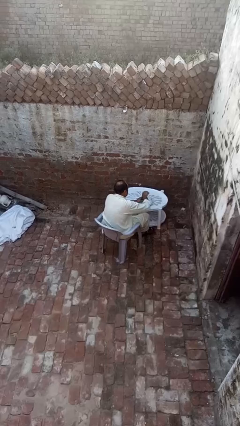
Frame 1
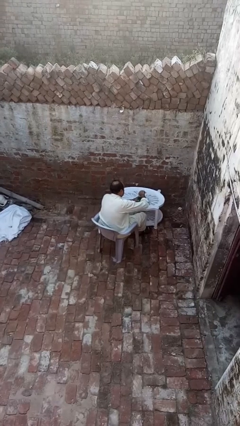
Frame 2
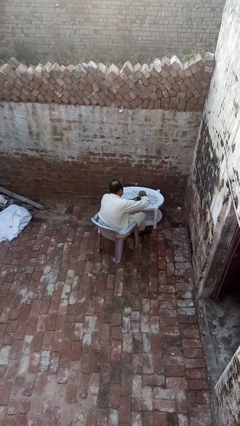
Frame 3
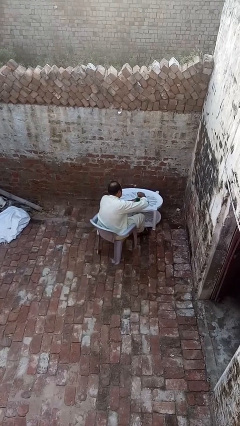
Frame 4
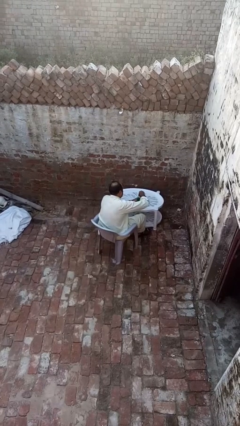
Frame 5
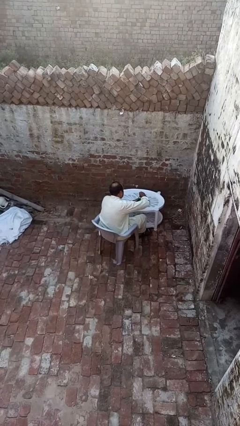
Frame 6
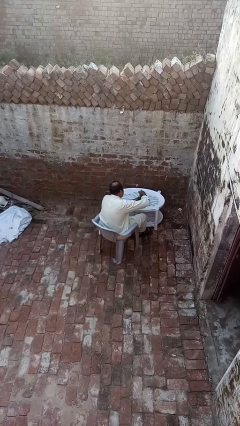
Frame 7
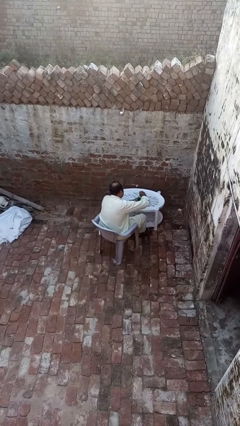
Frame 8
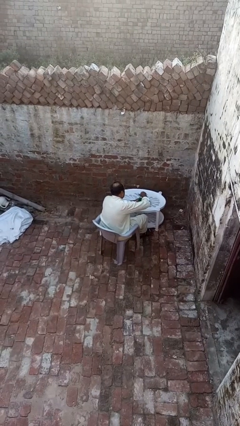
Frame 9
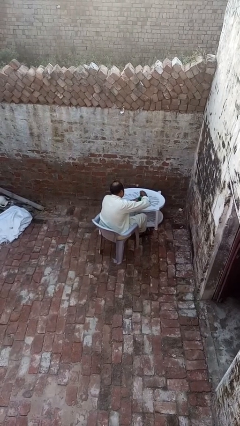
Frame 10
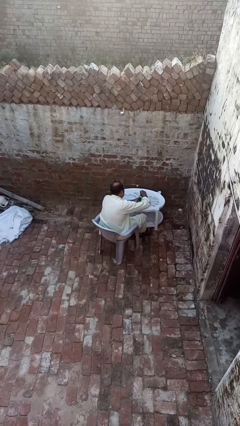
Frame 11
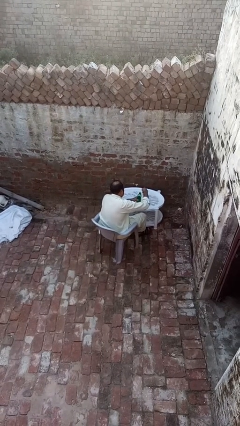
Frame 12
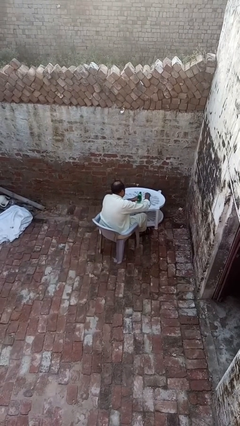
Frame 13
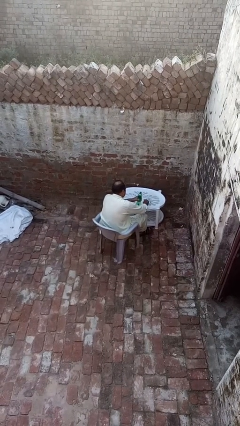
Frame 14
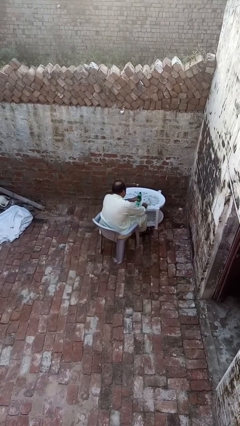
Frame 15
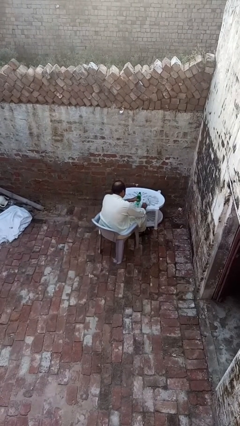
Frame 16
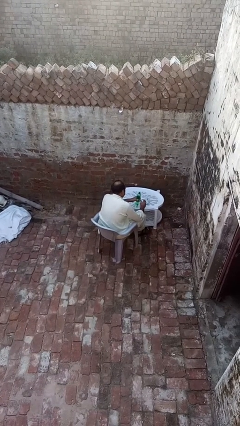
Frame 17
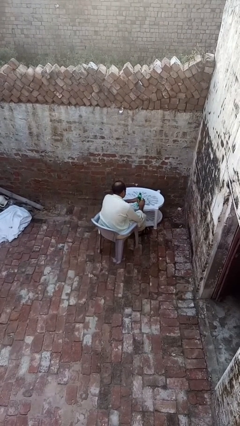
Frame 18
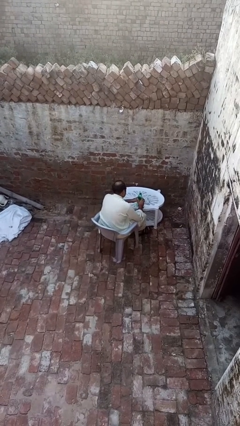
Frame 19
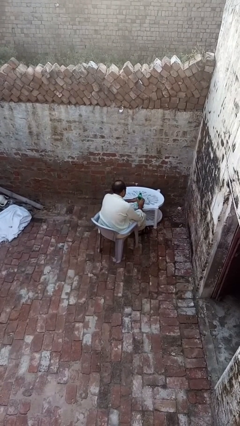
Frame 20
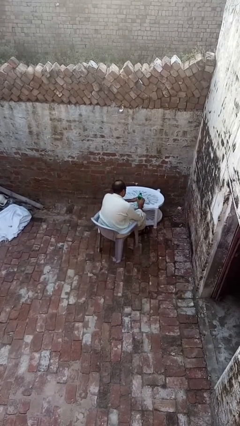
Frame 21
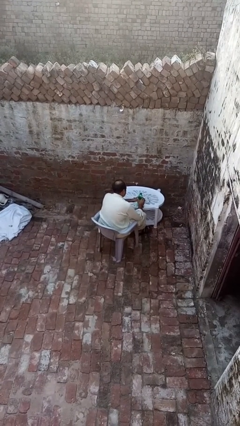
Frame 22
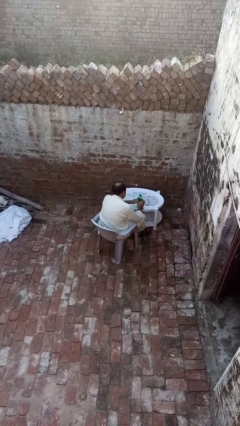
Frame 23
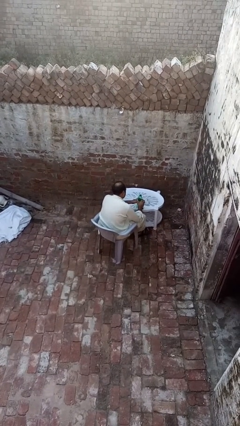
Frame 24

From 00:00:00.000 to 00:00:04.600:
person unscrews lid from bottle

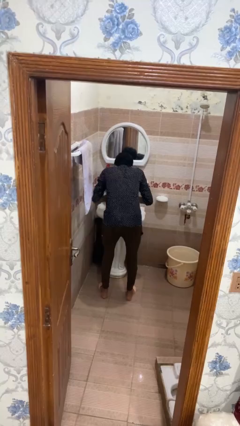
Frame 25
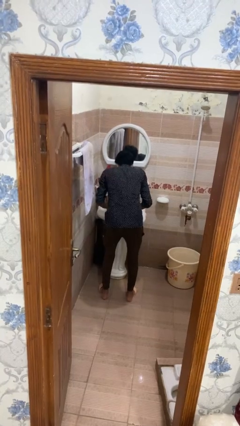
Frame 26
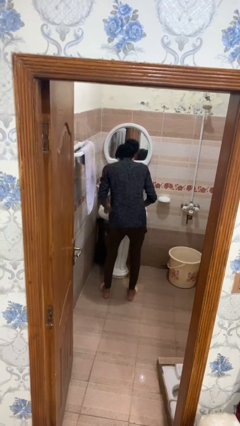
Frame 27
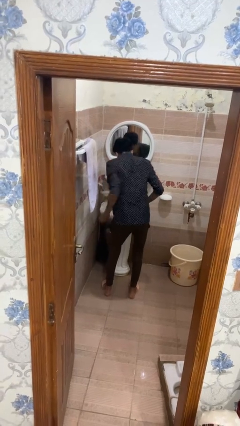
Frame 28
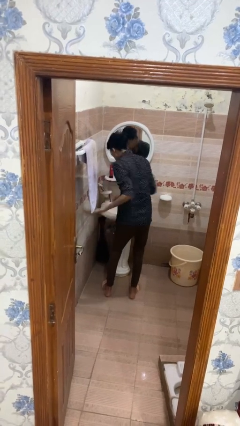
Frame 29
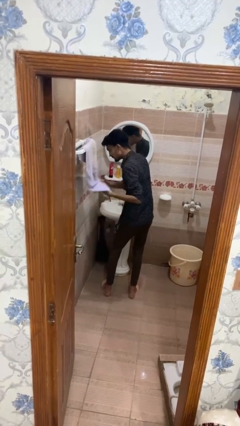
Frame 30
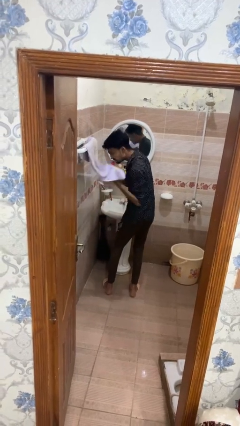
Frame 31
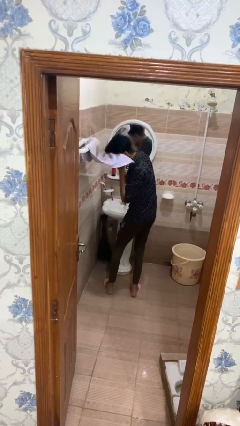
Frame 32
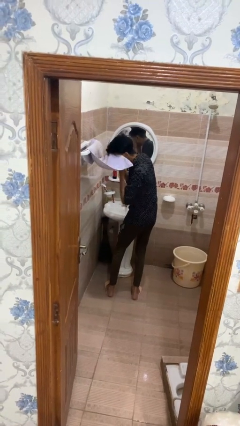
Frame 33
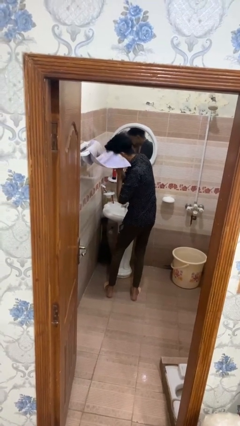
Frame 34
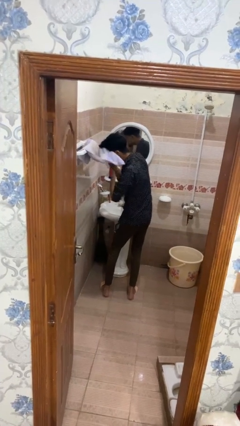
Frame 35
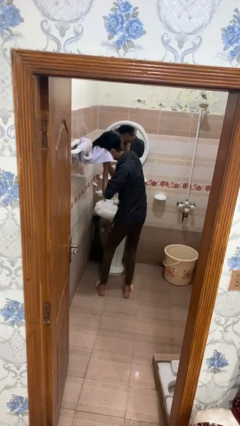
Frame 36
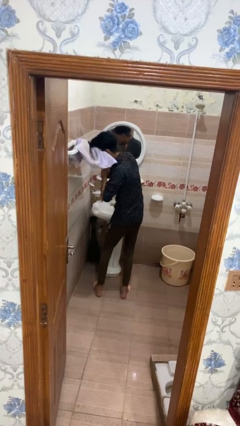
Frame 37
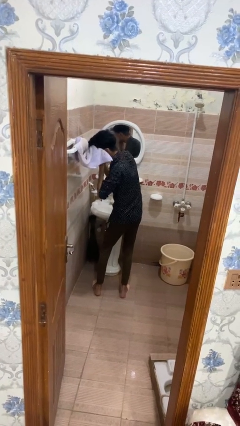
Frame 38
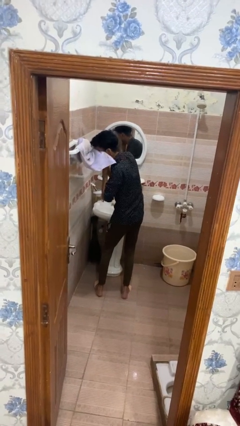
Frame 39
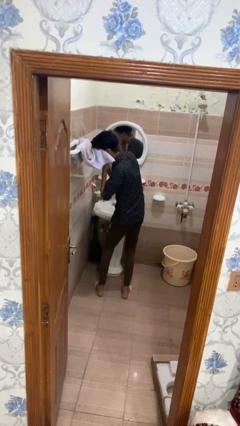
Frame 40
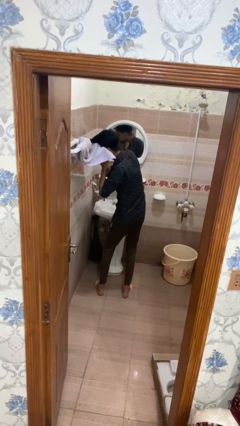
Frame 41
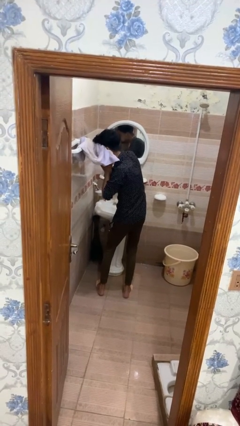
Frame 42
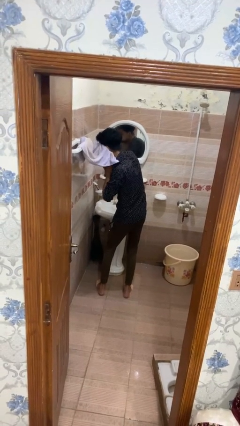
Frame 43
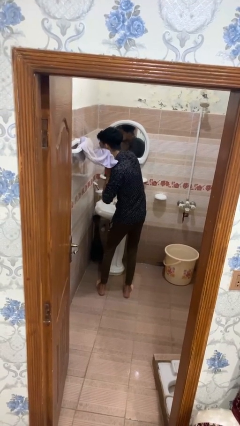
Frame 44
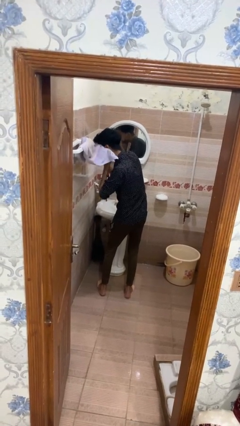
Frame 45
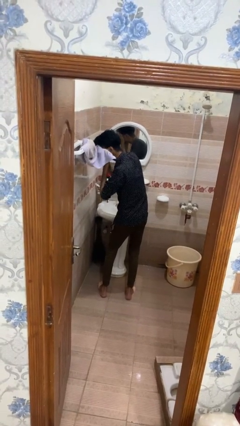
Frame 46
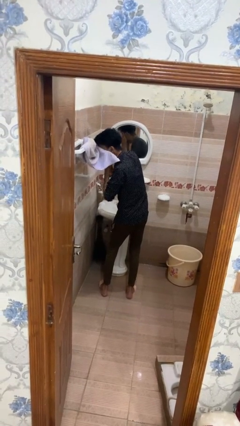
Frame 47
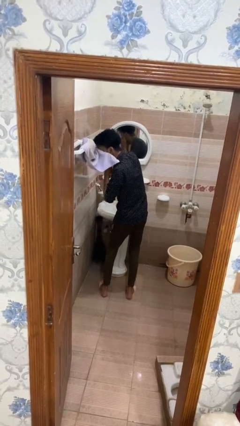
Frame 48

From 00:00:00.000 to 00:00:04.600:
person dries face with towel

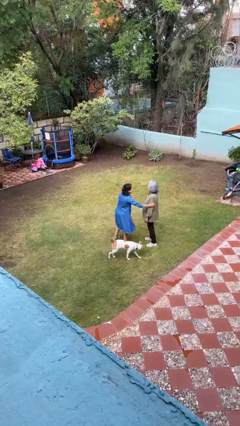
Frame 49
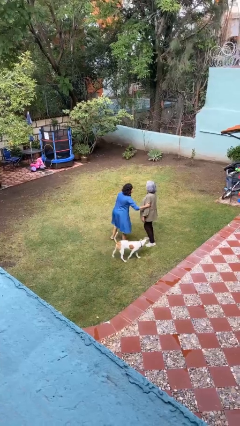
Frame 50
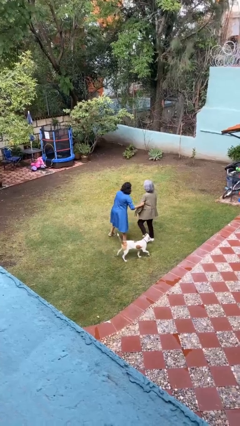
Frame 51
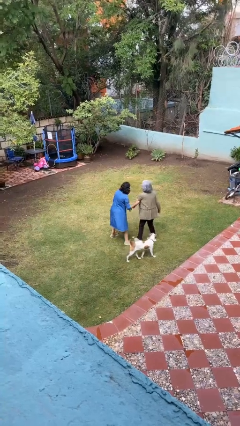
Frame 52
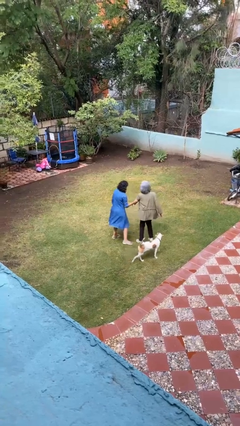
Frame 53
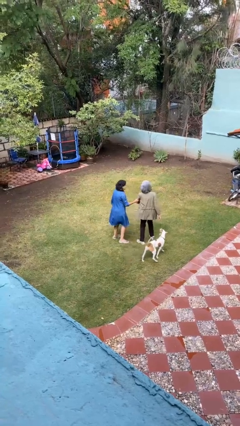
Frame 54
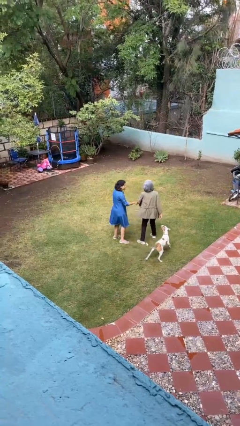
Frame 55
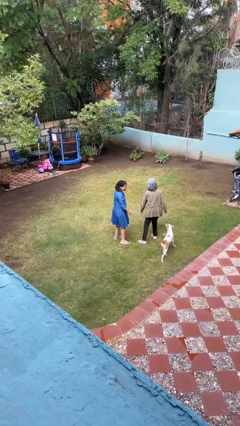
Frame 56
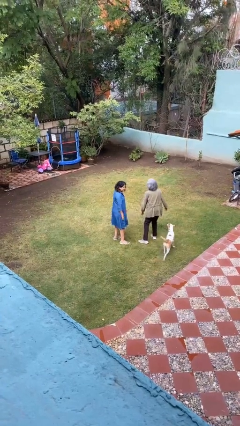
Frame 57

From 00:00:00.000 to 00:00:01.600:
person grabs person by bicep

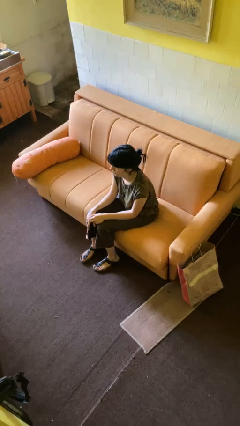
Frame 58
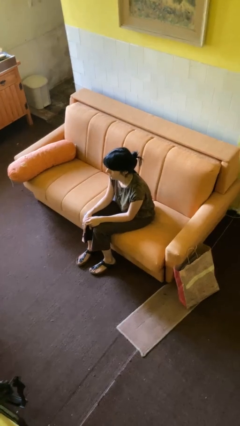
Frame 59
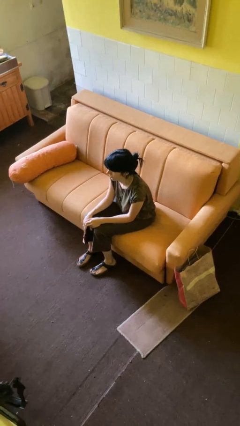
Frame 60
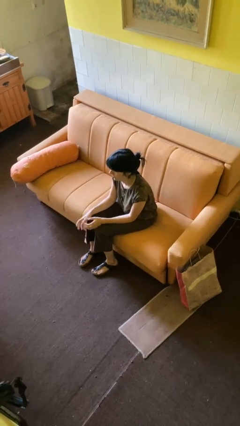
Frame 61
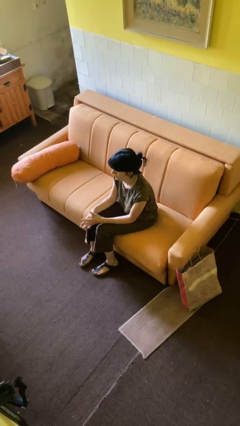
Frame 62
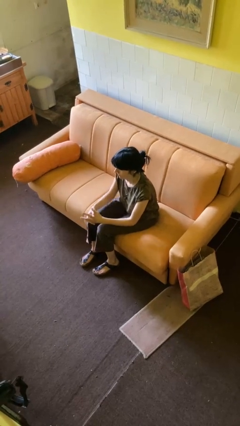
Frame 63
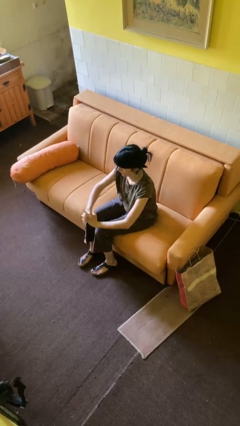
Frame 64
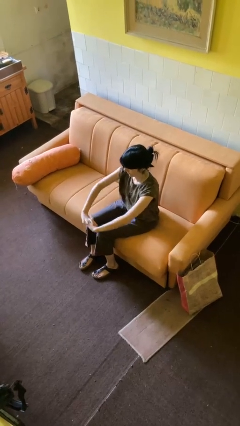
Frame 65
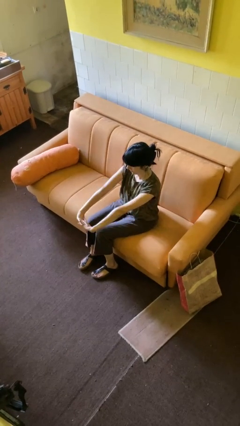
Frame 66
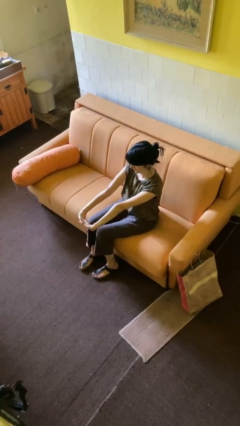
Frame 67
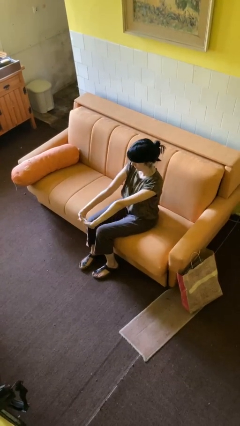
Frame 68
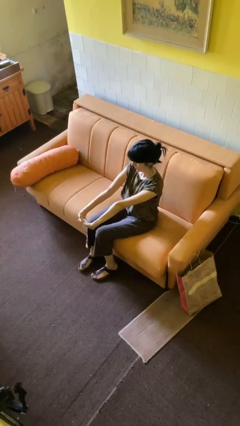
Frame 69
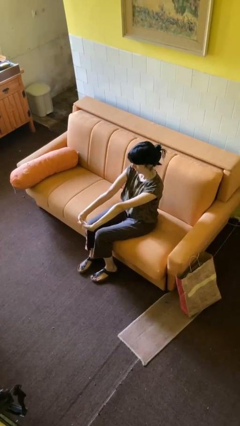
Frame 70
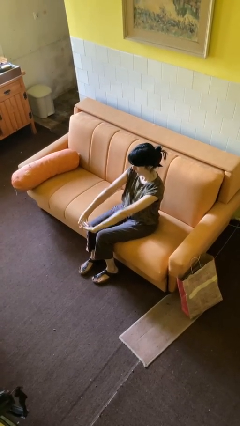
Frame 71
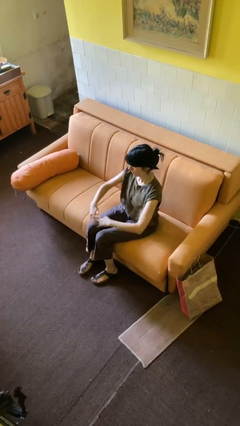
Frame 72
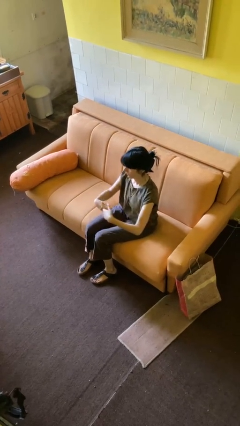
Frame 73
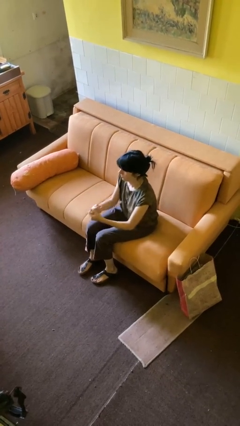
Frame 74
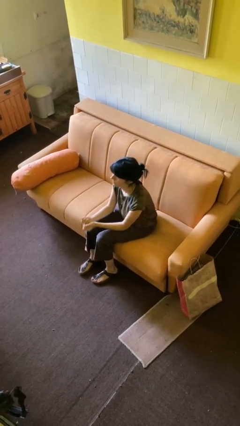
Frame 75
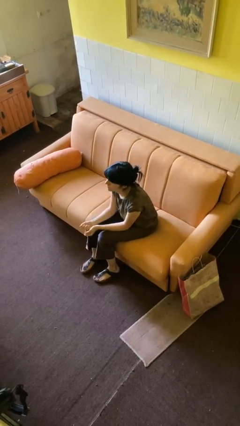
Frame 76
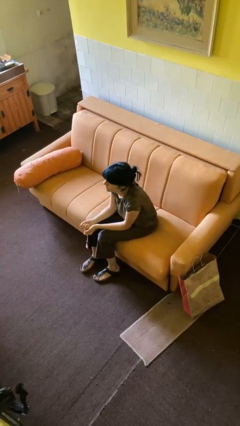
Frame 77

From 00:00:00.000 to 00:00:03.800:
person cracks knuckles

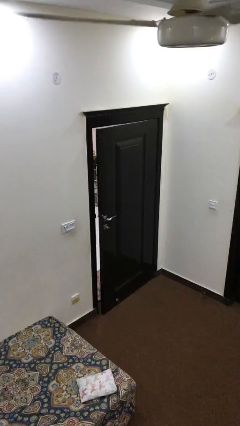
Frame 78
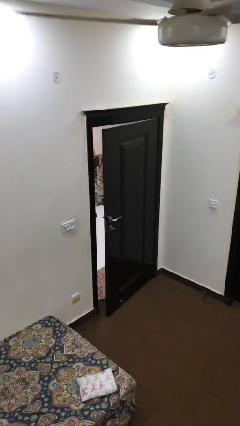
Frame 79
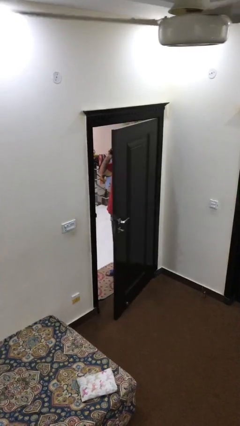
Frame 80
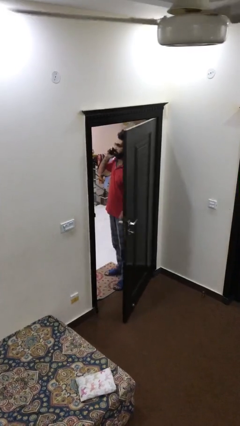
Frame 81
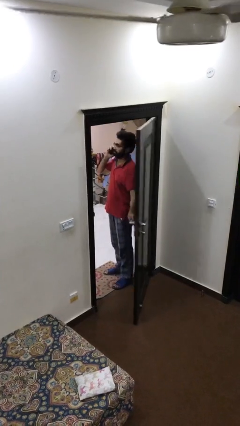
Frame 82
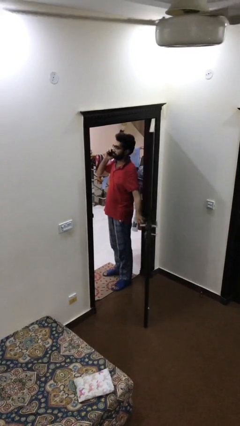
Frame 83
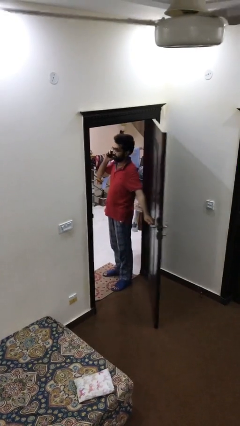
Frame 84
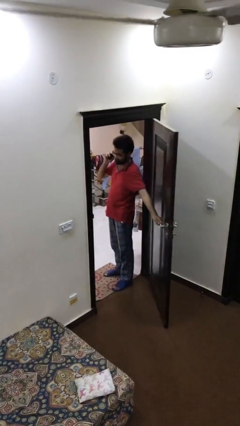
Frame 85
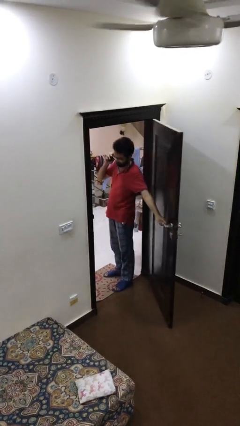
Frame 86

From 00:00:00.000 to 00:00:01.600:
person opens facility door

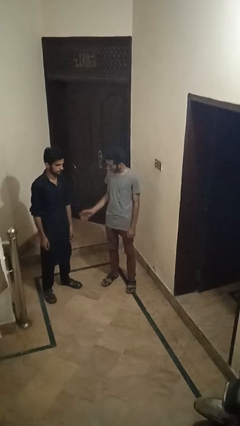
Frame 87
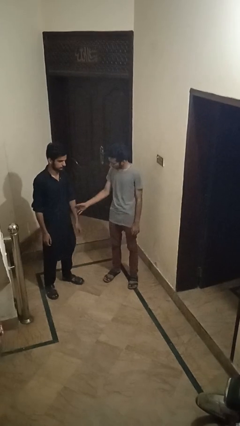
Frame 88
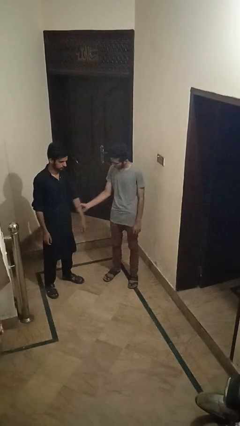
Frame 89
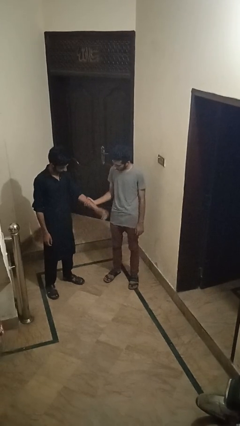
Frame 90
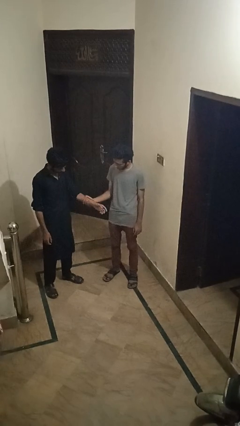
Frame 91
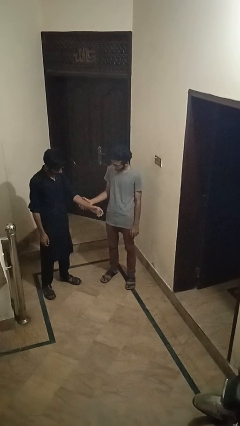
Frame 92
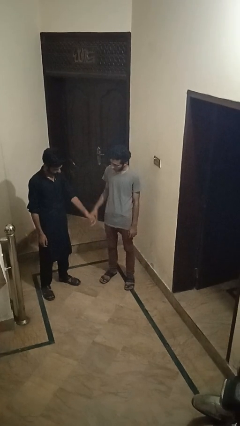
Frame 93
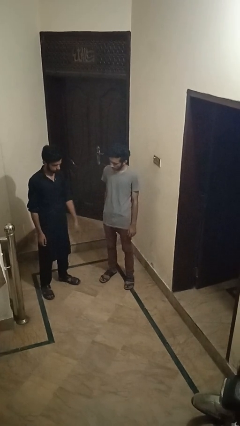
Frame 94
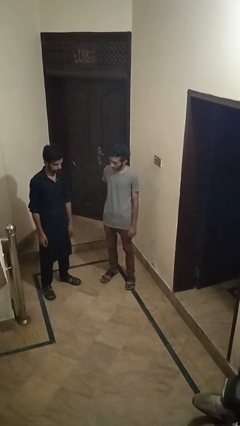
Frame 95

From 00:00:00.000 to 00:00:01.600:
person grabs person by forearm
